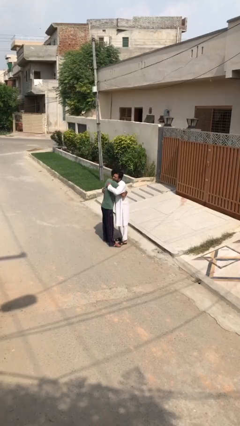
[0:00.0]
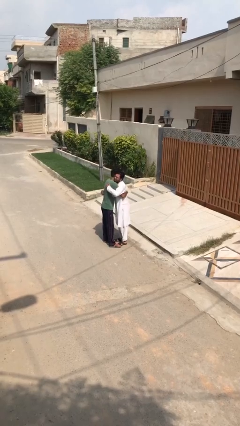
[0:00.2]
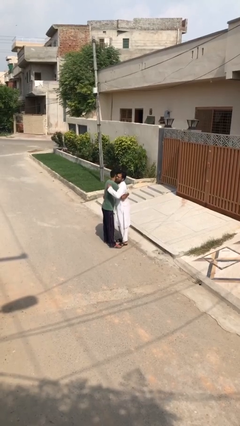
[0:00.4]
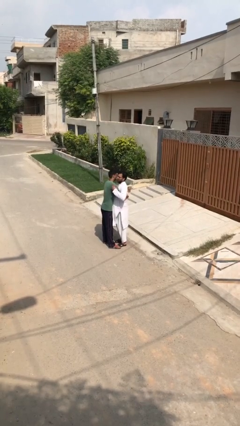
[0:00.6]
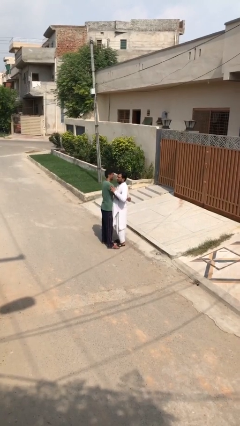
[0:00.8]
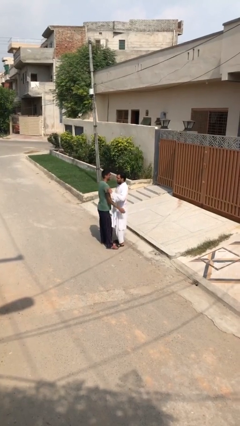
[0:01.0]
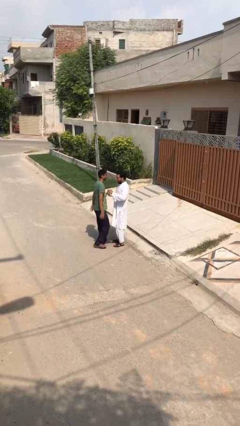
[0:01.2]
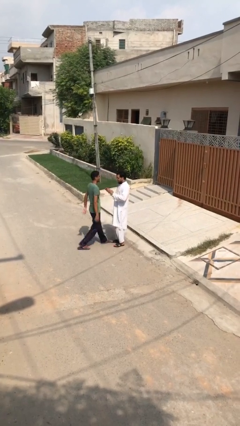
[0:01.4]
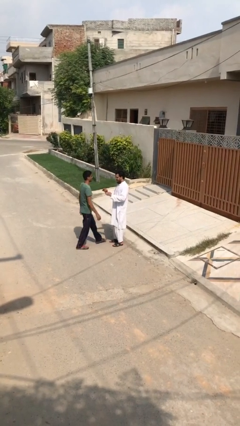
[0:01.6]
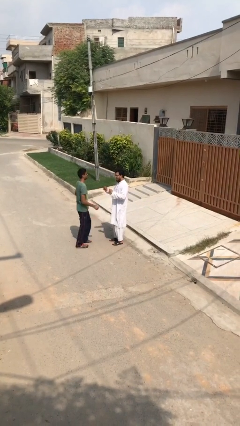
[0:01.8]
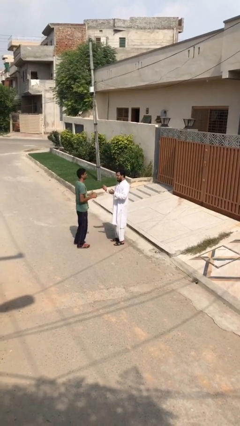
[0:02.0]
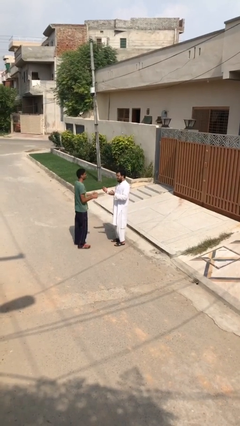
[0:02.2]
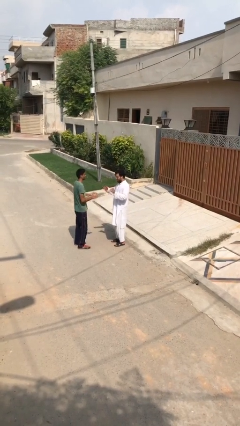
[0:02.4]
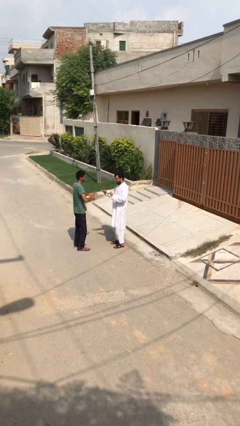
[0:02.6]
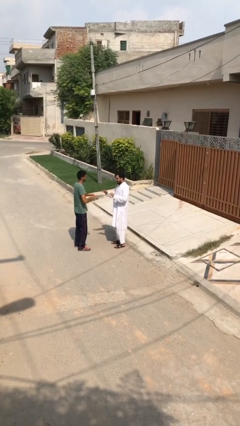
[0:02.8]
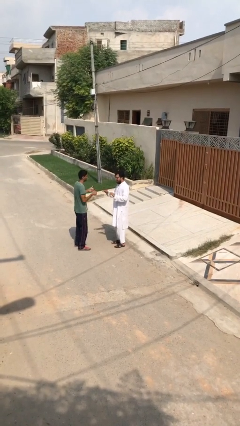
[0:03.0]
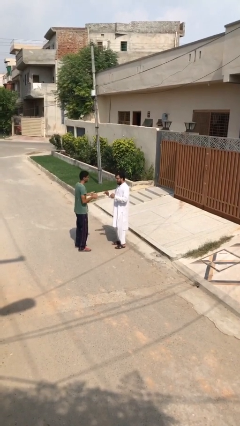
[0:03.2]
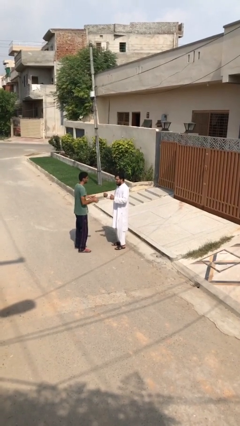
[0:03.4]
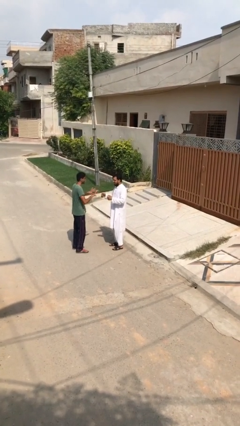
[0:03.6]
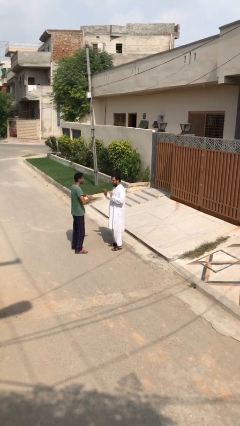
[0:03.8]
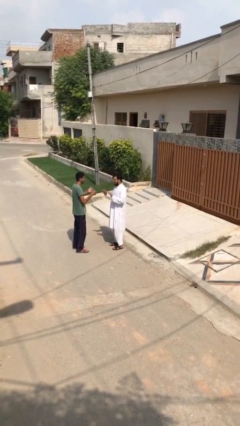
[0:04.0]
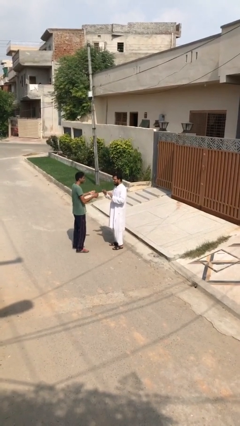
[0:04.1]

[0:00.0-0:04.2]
person talks to person

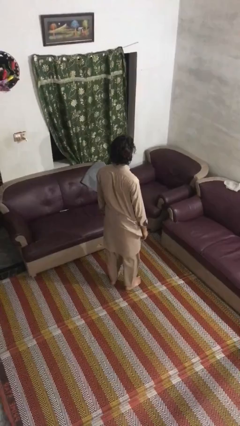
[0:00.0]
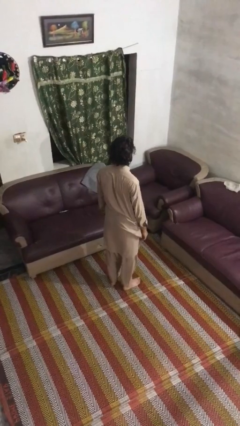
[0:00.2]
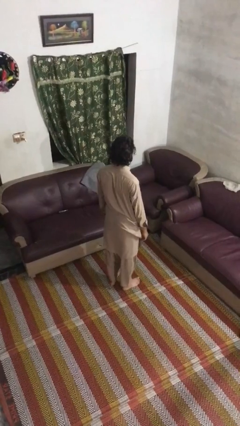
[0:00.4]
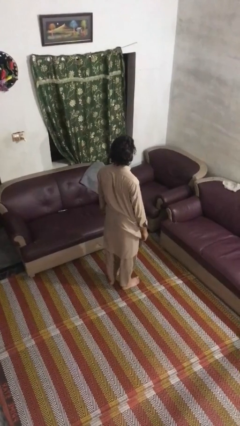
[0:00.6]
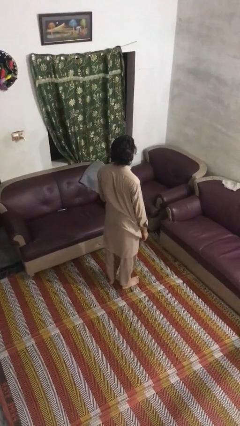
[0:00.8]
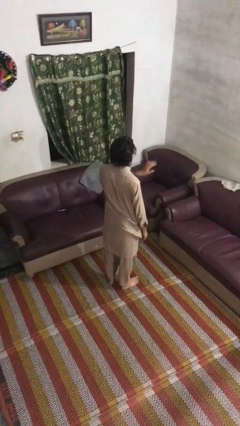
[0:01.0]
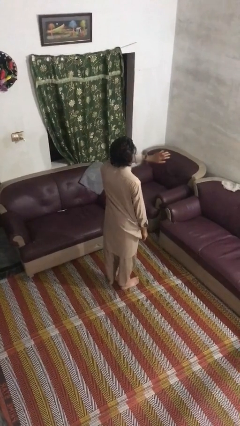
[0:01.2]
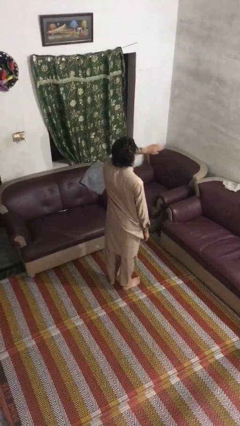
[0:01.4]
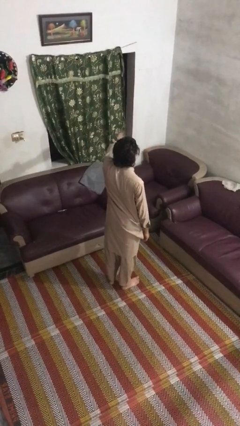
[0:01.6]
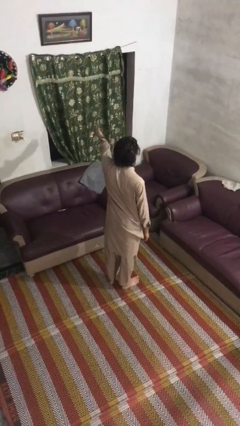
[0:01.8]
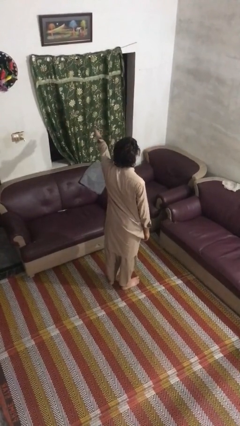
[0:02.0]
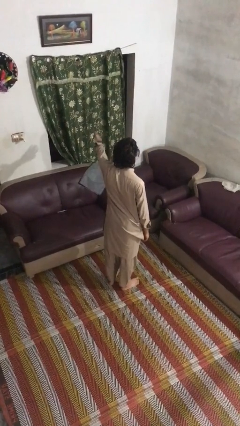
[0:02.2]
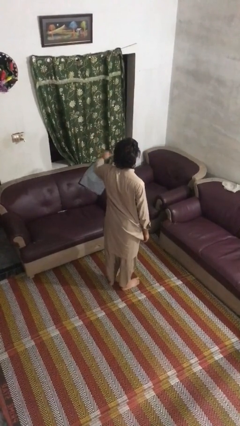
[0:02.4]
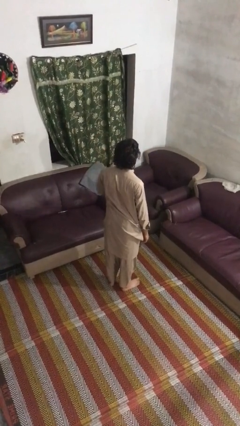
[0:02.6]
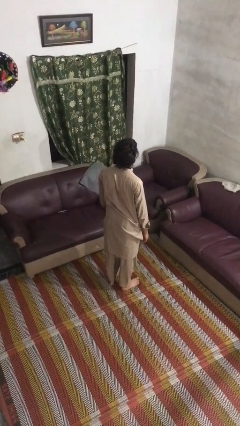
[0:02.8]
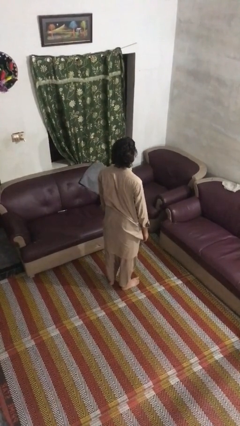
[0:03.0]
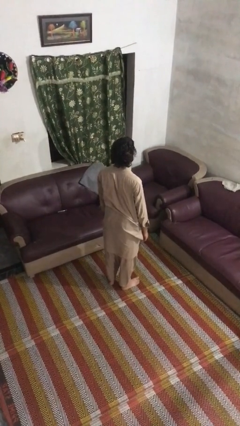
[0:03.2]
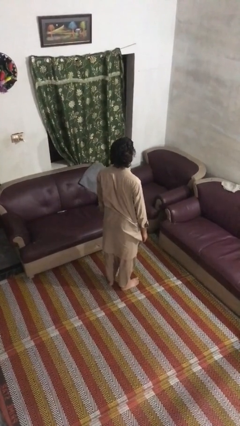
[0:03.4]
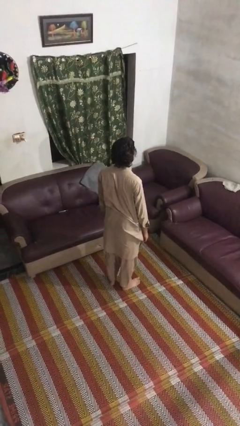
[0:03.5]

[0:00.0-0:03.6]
person gestures swipe left

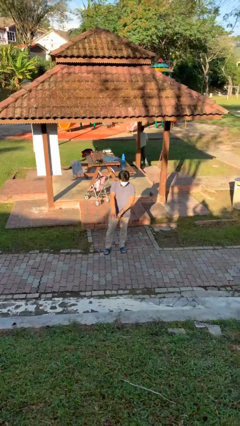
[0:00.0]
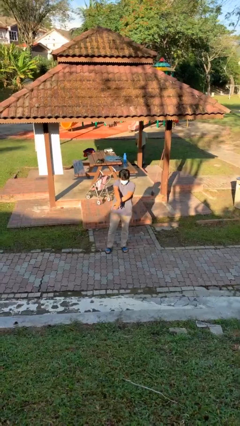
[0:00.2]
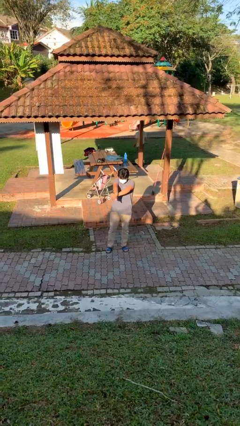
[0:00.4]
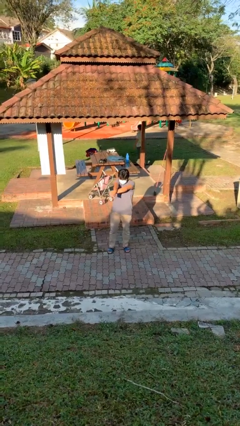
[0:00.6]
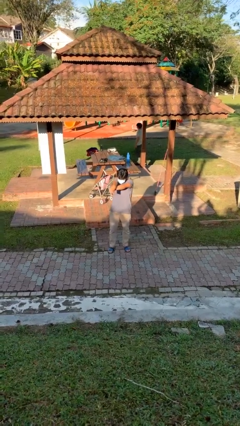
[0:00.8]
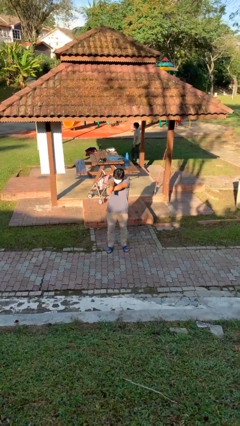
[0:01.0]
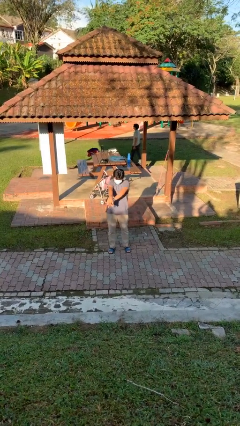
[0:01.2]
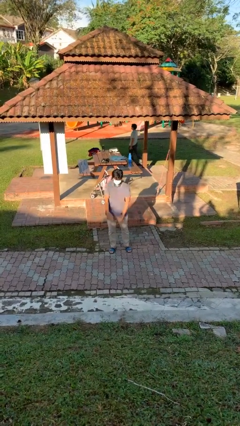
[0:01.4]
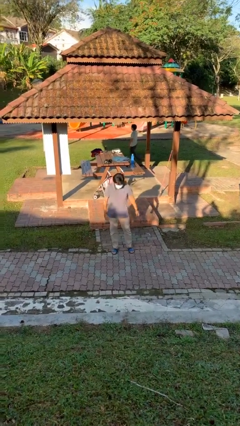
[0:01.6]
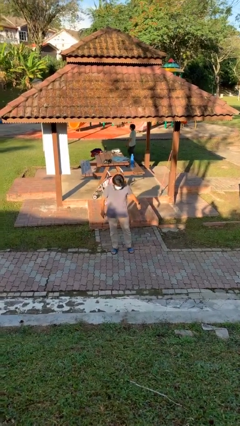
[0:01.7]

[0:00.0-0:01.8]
person crosses arms

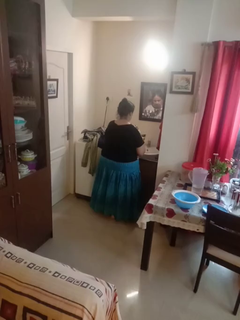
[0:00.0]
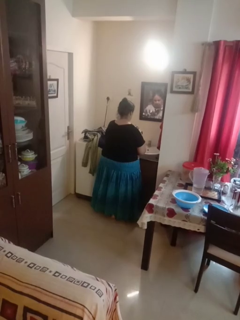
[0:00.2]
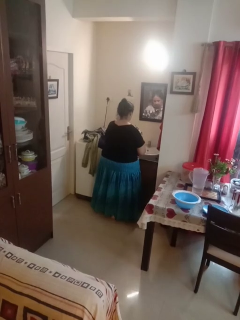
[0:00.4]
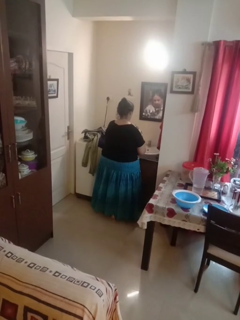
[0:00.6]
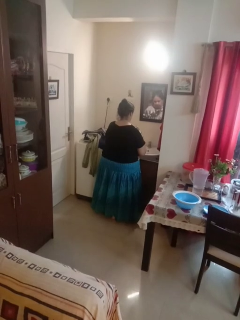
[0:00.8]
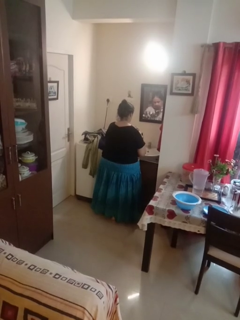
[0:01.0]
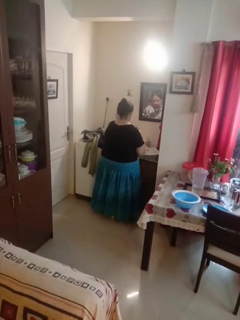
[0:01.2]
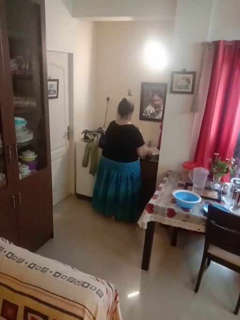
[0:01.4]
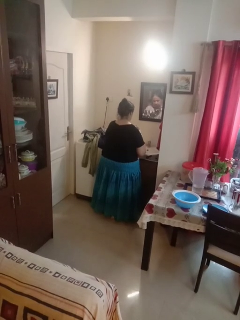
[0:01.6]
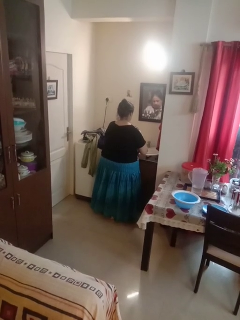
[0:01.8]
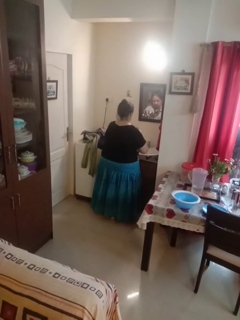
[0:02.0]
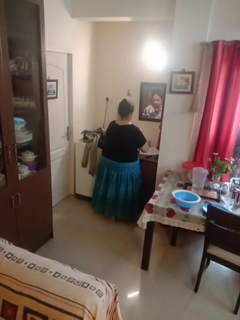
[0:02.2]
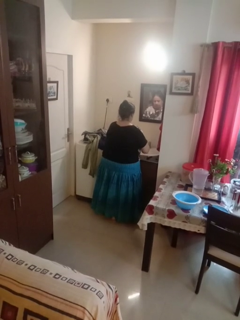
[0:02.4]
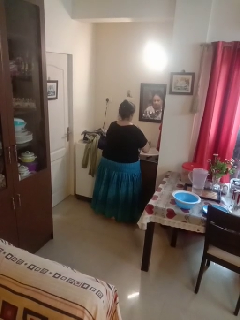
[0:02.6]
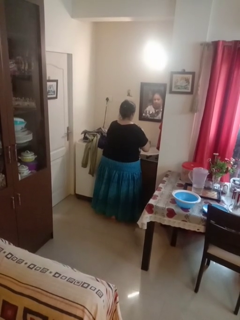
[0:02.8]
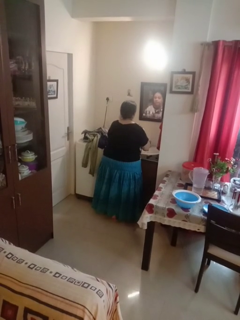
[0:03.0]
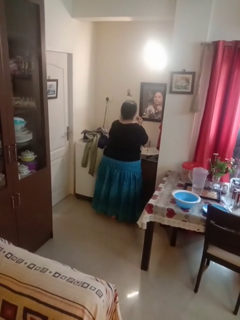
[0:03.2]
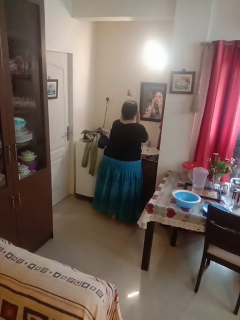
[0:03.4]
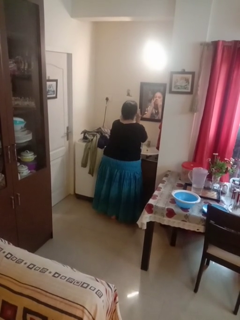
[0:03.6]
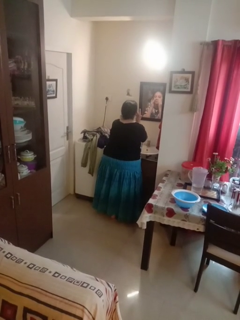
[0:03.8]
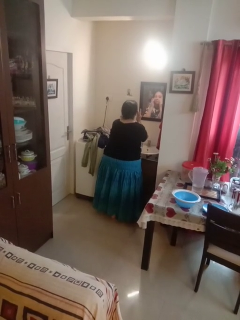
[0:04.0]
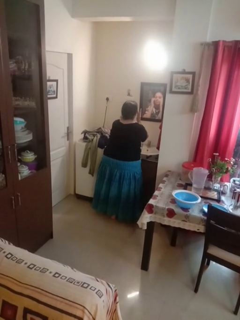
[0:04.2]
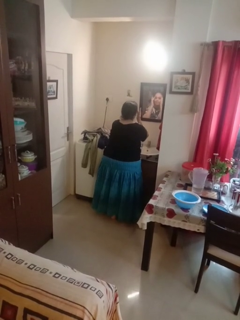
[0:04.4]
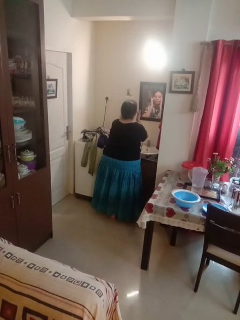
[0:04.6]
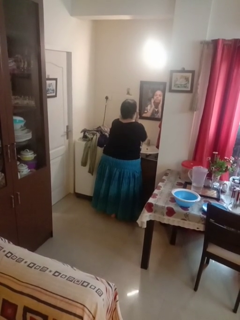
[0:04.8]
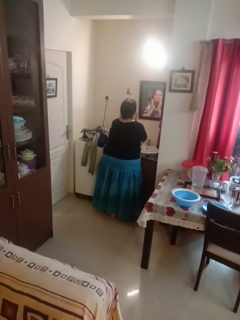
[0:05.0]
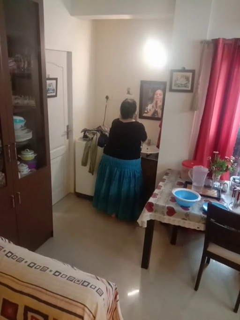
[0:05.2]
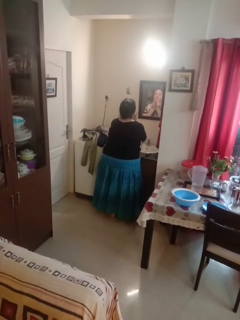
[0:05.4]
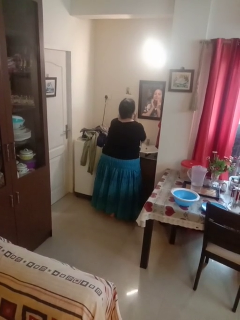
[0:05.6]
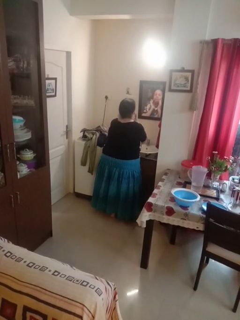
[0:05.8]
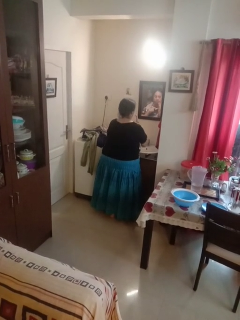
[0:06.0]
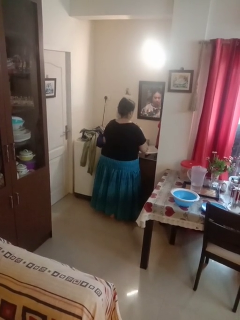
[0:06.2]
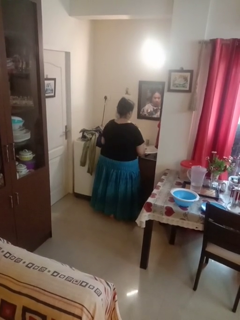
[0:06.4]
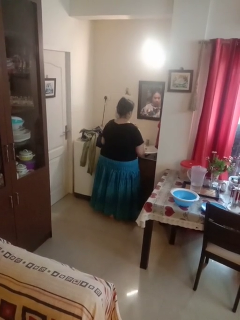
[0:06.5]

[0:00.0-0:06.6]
person applies foundation makeup

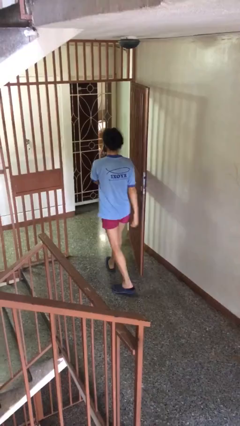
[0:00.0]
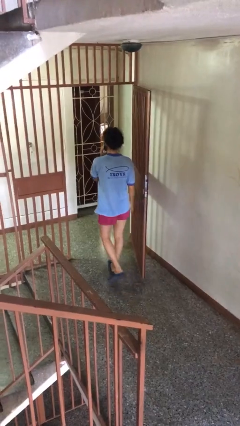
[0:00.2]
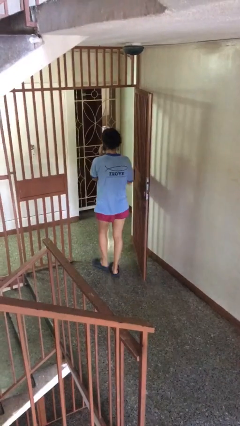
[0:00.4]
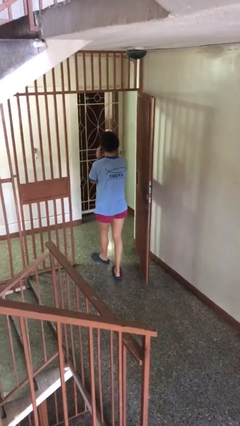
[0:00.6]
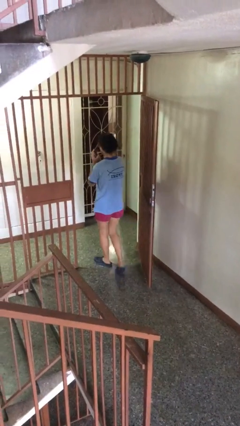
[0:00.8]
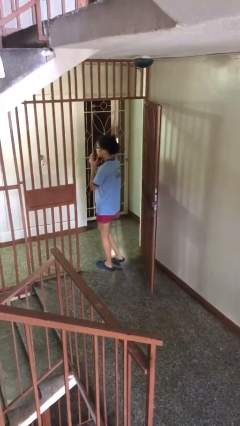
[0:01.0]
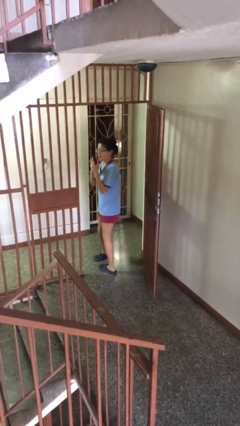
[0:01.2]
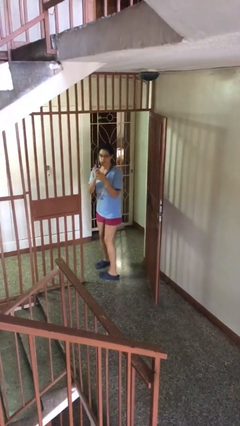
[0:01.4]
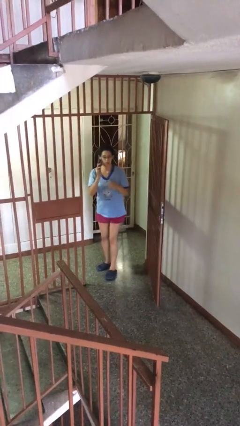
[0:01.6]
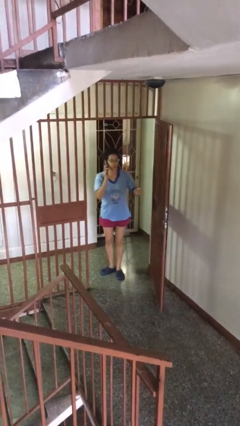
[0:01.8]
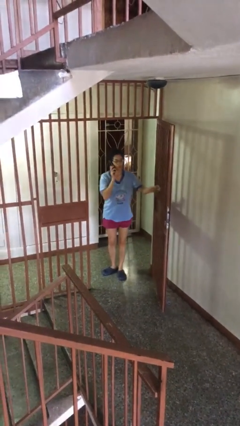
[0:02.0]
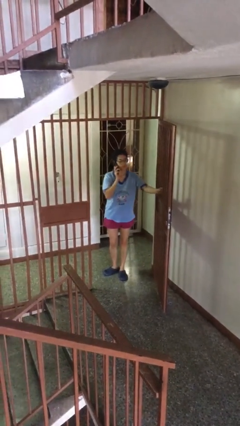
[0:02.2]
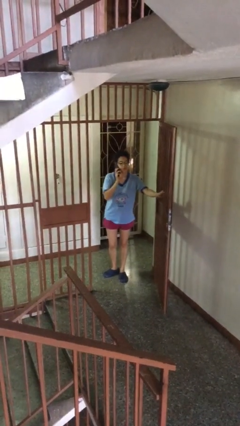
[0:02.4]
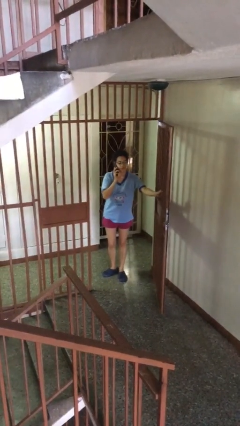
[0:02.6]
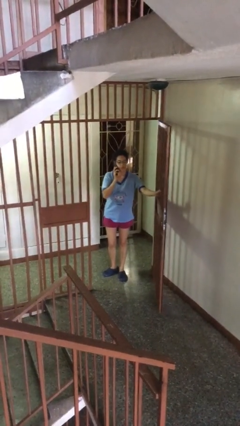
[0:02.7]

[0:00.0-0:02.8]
person exits scene through structure
